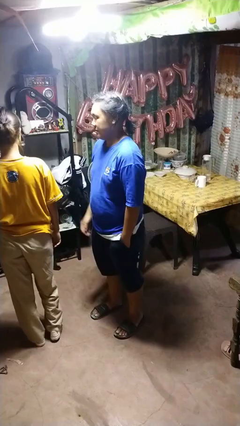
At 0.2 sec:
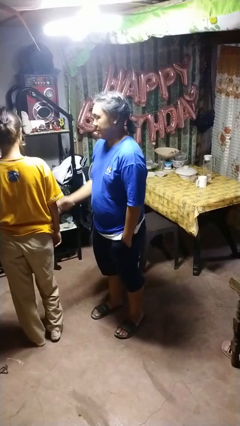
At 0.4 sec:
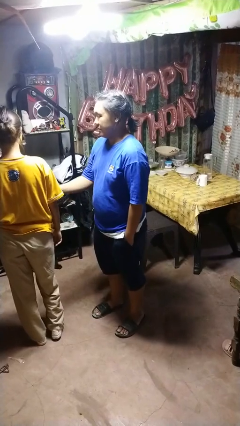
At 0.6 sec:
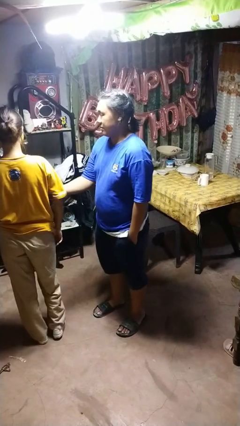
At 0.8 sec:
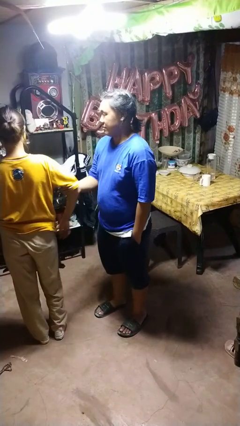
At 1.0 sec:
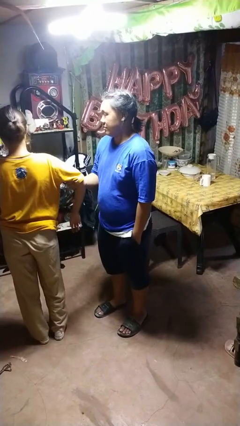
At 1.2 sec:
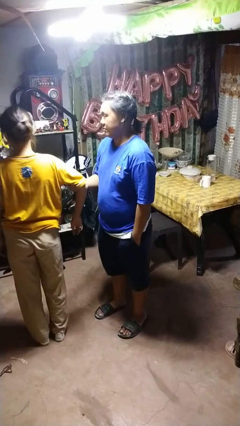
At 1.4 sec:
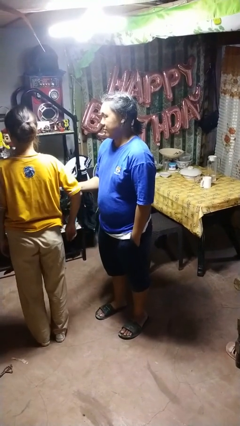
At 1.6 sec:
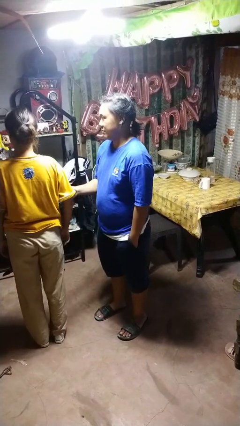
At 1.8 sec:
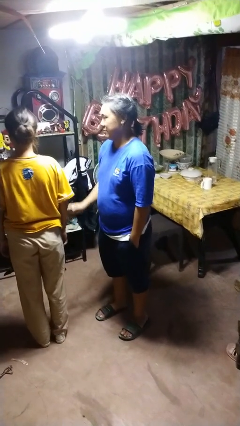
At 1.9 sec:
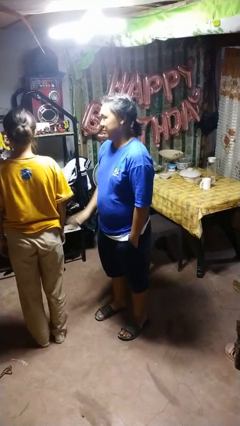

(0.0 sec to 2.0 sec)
person grabs person by bicep

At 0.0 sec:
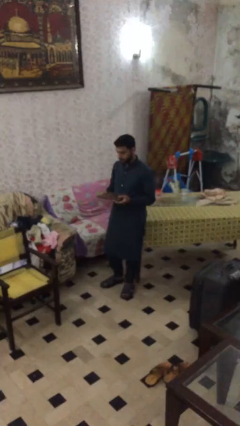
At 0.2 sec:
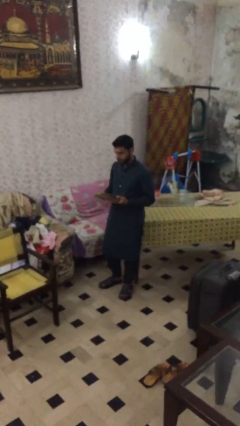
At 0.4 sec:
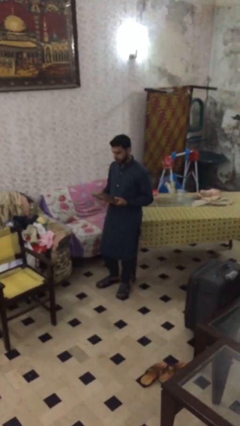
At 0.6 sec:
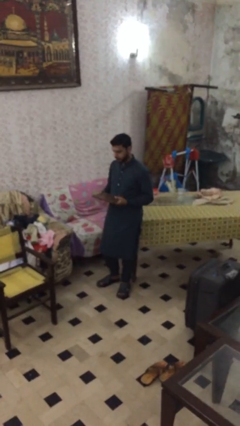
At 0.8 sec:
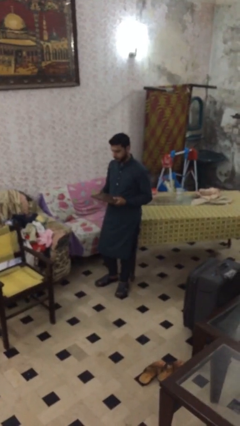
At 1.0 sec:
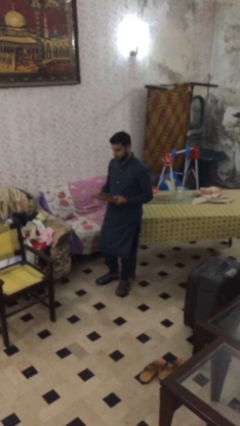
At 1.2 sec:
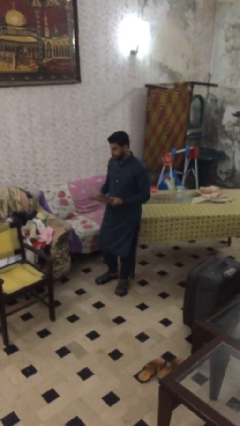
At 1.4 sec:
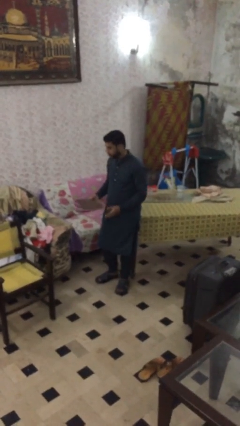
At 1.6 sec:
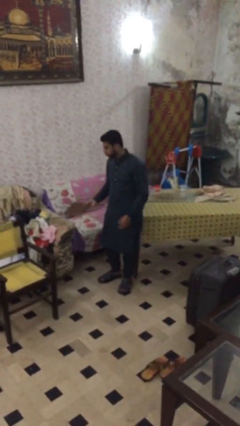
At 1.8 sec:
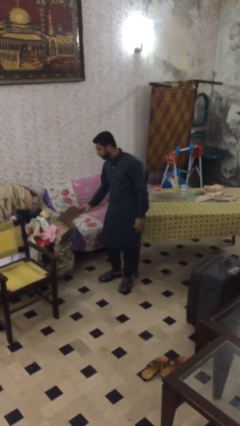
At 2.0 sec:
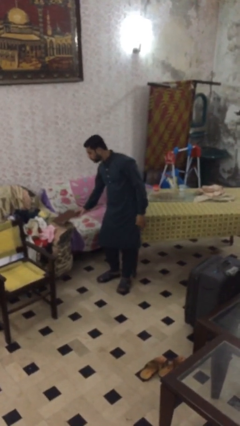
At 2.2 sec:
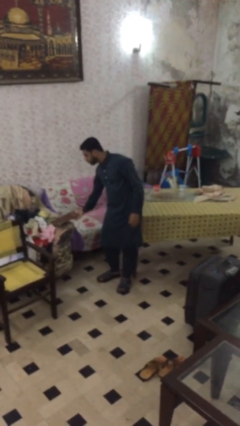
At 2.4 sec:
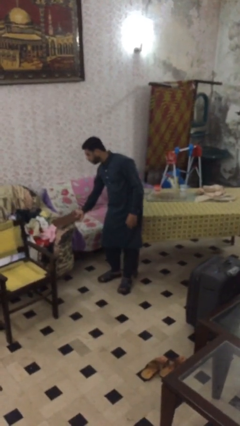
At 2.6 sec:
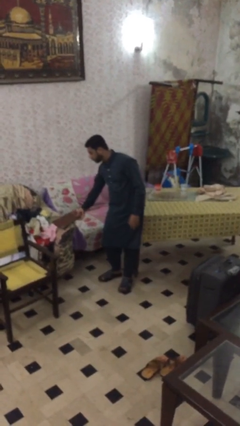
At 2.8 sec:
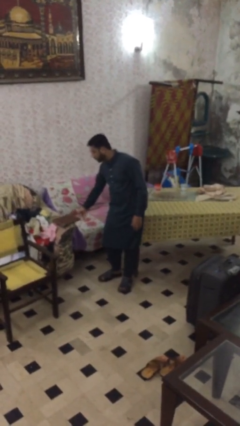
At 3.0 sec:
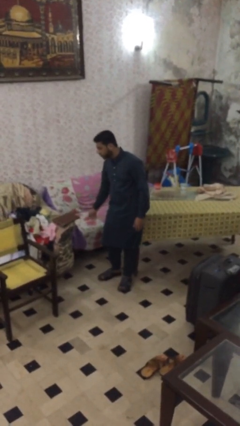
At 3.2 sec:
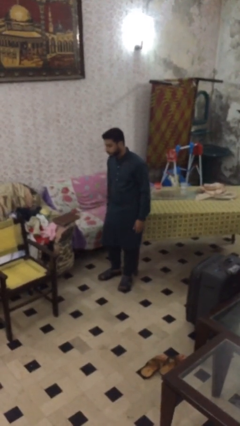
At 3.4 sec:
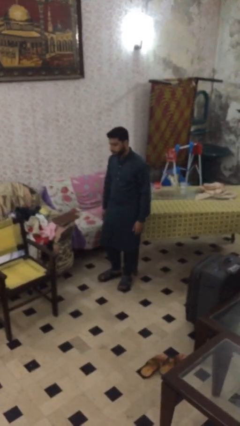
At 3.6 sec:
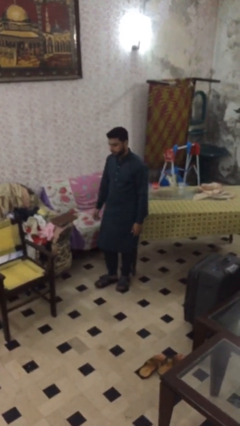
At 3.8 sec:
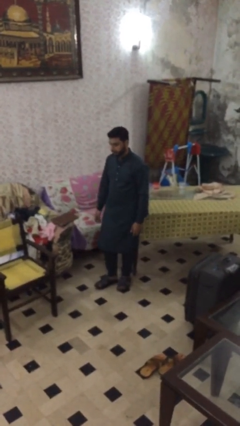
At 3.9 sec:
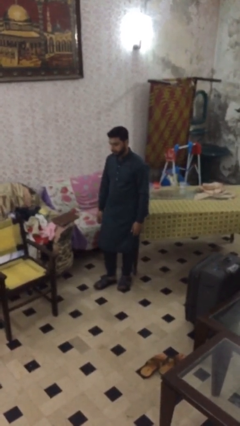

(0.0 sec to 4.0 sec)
person puts down object on table

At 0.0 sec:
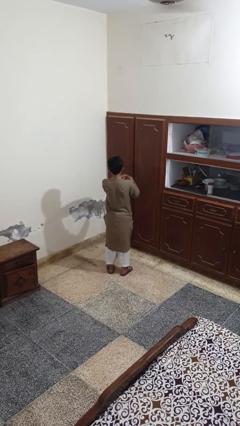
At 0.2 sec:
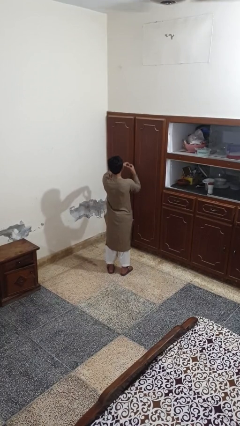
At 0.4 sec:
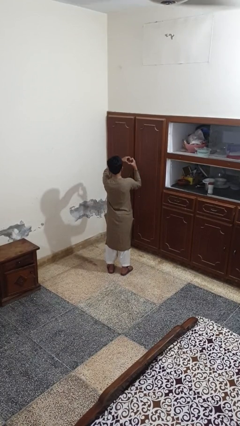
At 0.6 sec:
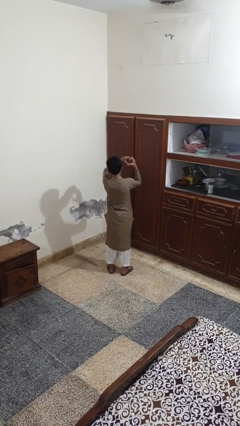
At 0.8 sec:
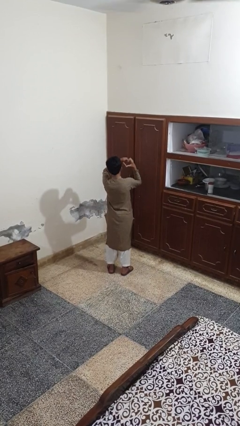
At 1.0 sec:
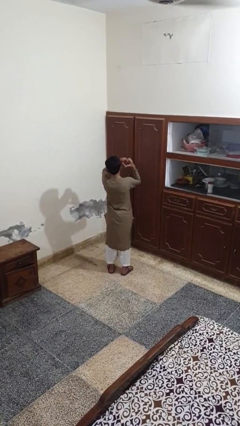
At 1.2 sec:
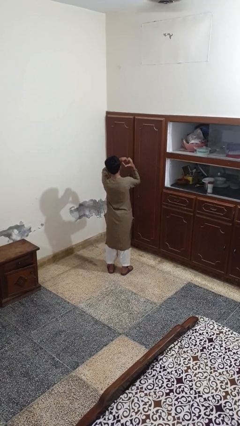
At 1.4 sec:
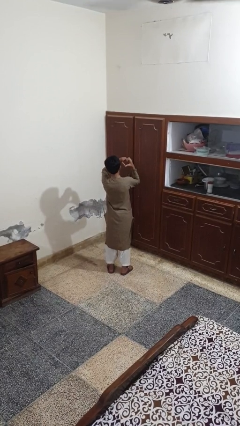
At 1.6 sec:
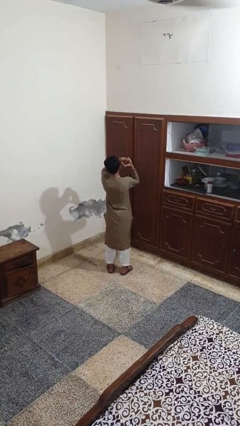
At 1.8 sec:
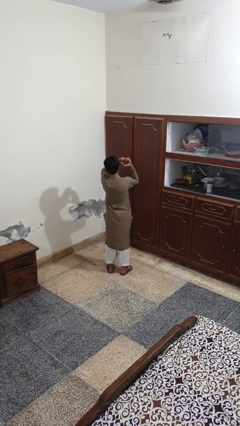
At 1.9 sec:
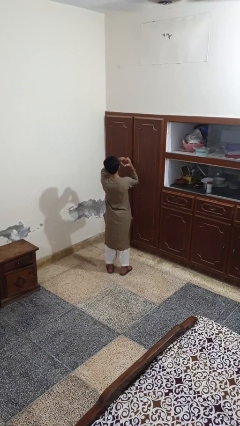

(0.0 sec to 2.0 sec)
person gestures heart

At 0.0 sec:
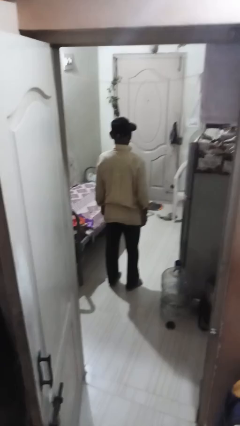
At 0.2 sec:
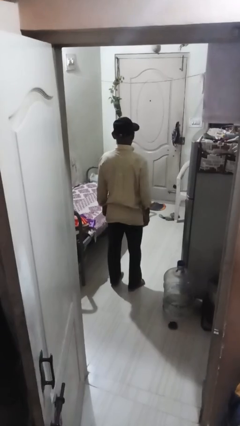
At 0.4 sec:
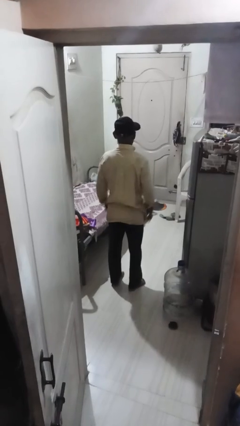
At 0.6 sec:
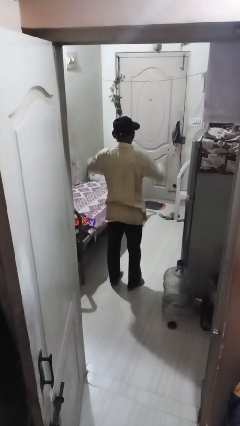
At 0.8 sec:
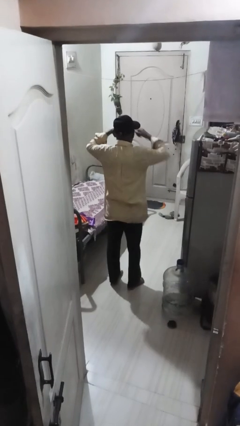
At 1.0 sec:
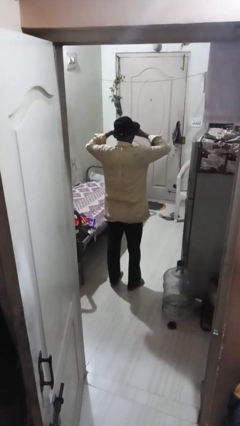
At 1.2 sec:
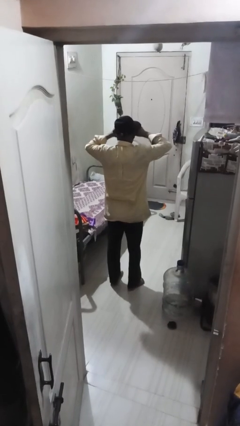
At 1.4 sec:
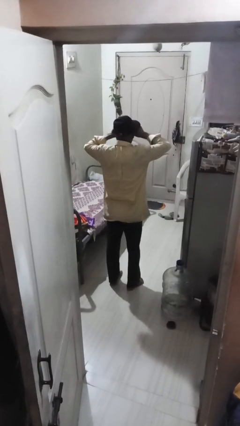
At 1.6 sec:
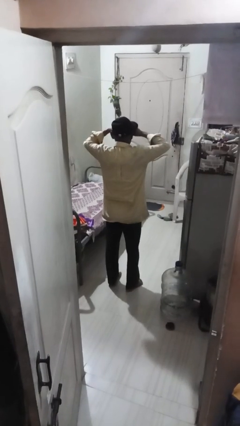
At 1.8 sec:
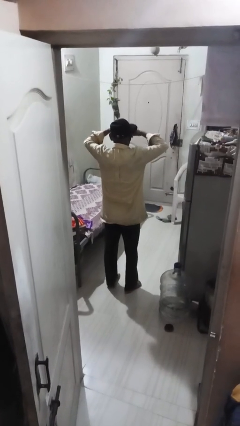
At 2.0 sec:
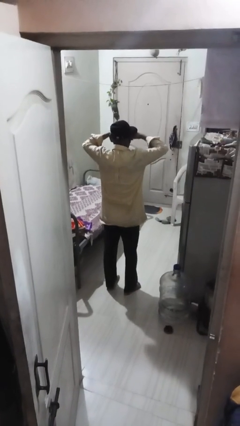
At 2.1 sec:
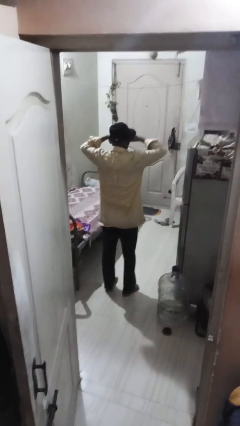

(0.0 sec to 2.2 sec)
person rubs eyes

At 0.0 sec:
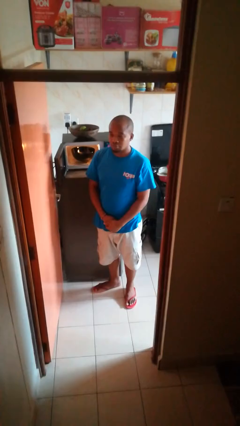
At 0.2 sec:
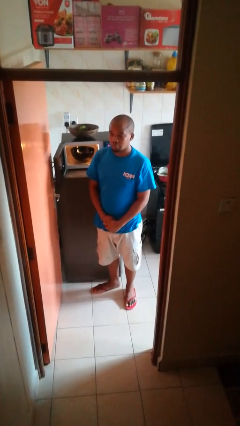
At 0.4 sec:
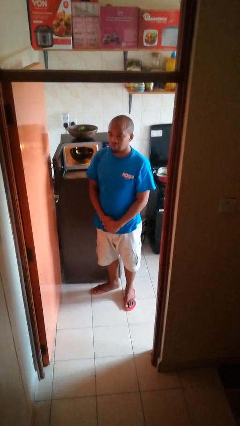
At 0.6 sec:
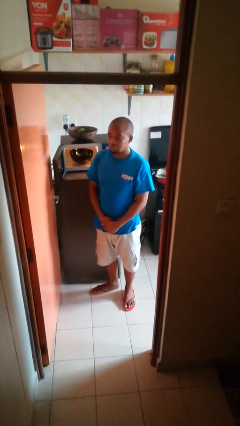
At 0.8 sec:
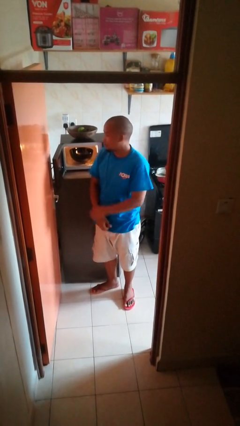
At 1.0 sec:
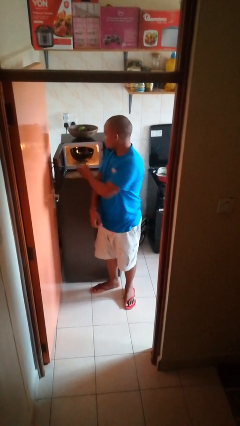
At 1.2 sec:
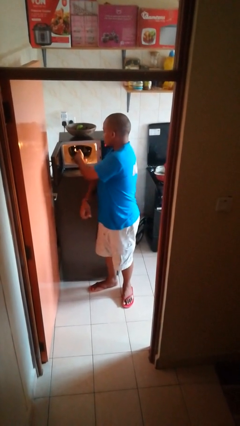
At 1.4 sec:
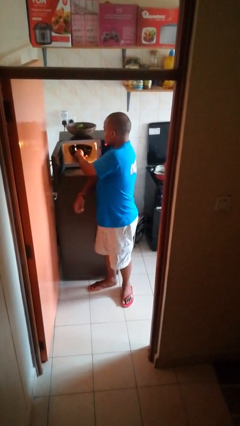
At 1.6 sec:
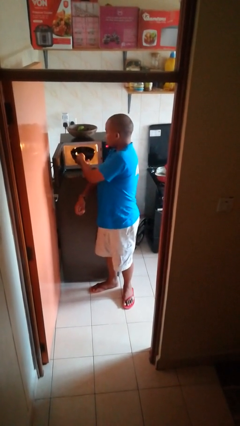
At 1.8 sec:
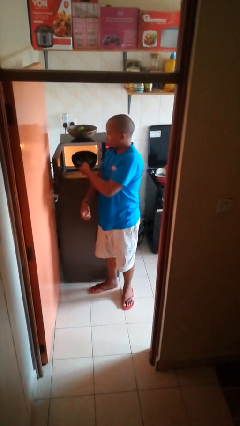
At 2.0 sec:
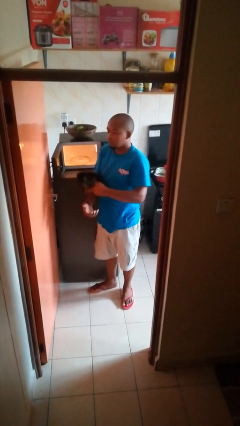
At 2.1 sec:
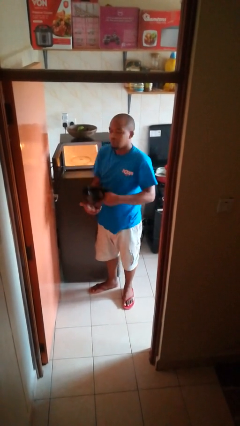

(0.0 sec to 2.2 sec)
person takes object from microwave

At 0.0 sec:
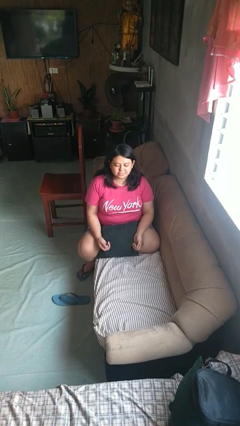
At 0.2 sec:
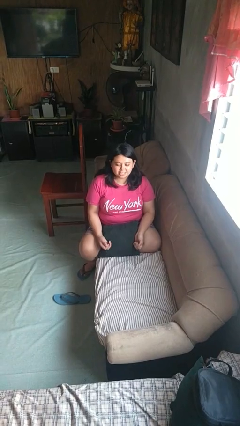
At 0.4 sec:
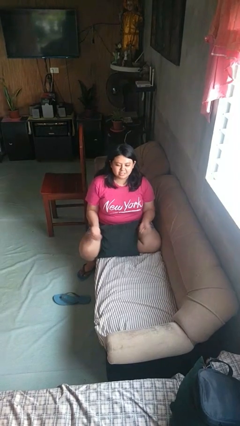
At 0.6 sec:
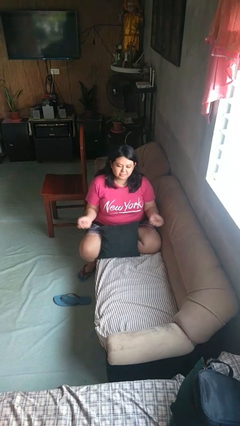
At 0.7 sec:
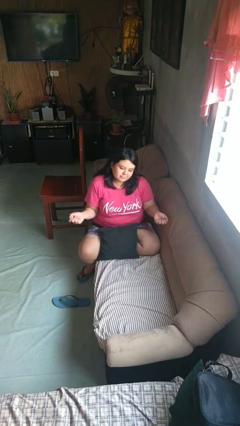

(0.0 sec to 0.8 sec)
person shrugs

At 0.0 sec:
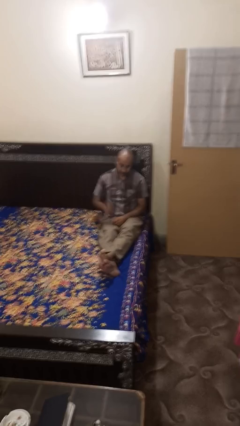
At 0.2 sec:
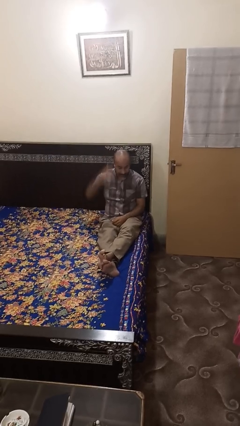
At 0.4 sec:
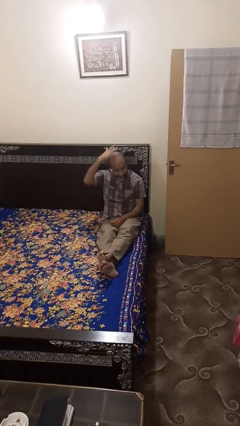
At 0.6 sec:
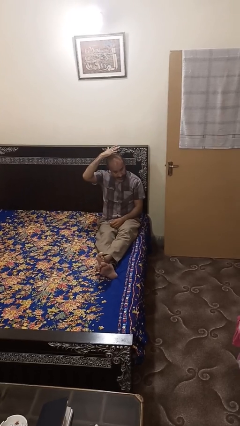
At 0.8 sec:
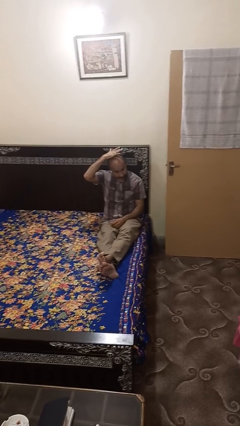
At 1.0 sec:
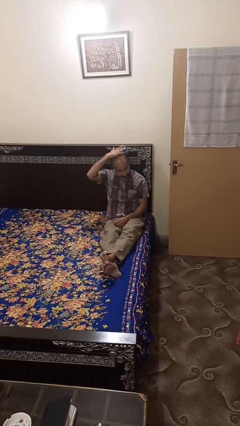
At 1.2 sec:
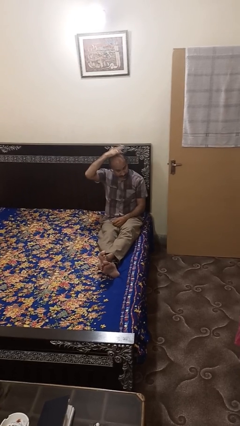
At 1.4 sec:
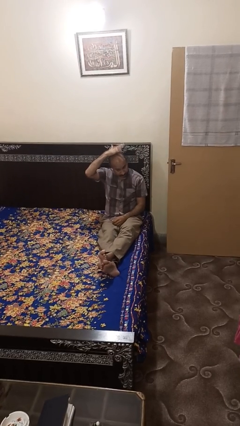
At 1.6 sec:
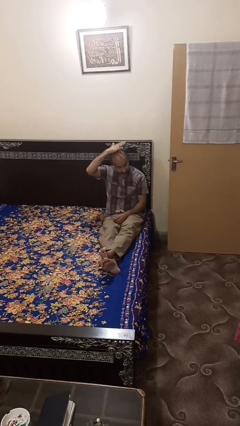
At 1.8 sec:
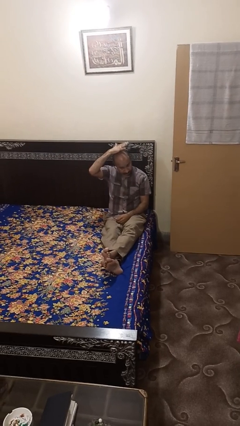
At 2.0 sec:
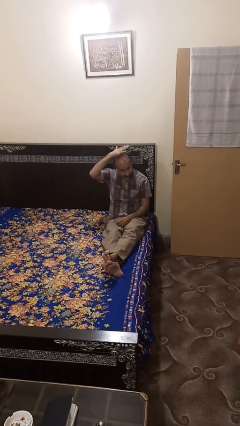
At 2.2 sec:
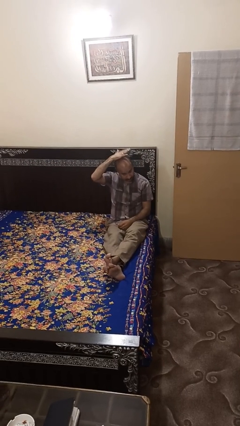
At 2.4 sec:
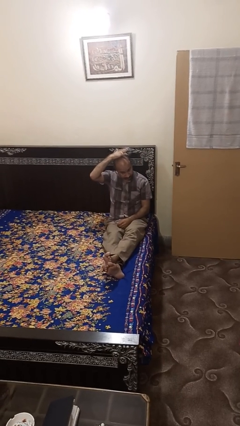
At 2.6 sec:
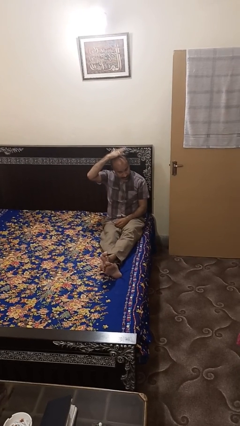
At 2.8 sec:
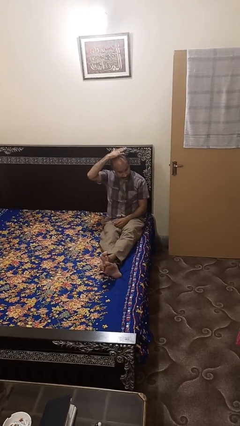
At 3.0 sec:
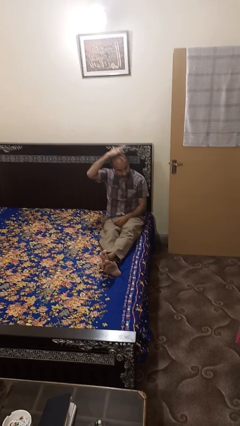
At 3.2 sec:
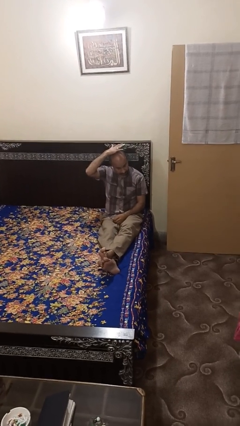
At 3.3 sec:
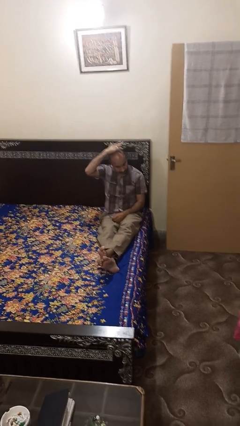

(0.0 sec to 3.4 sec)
person pats head

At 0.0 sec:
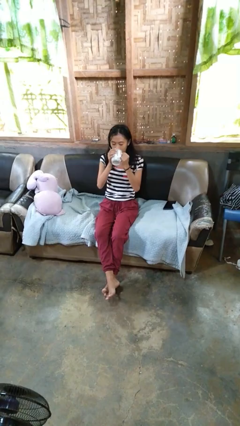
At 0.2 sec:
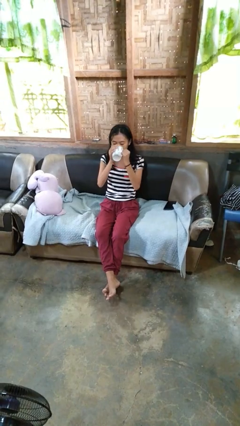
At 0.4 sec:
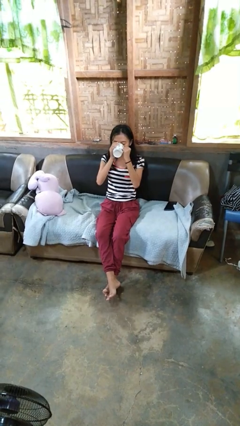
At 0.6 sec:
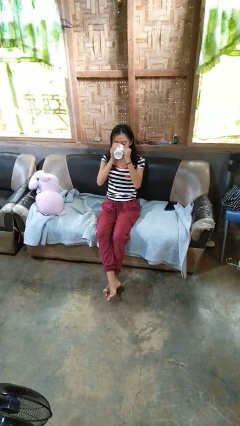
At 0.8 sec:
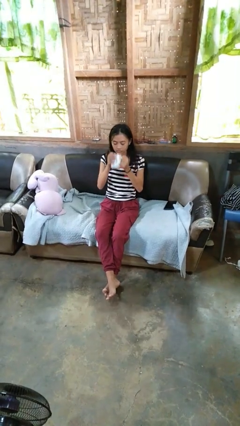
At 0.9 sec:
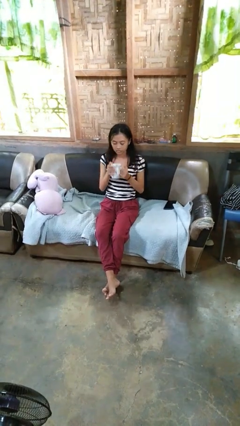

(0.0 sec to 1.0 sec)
person drinks from mug
